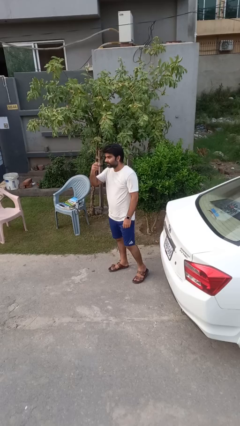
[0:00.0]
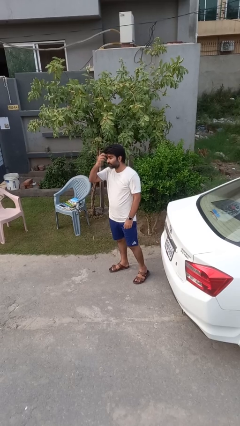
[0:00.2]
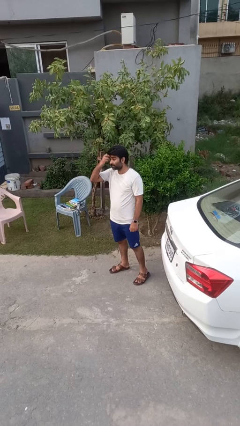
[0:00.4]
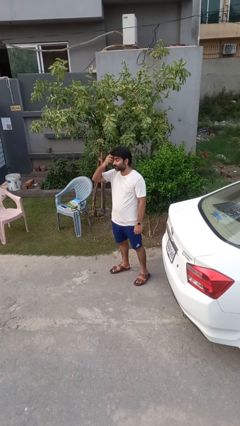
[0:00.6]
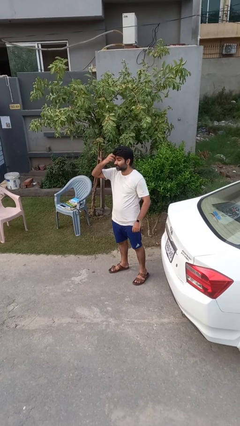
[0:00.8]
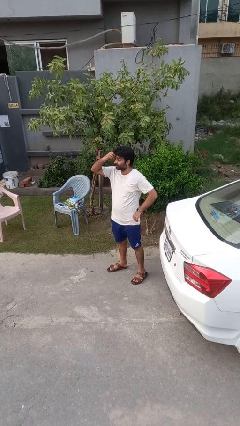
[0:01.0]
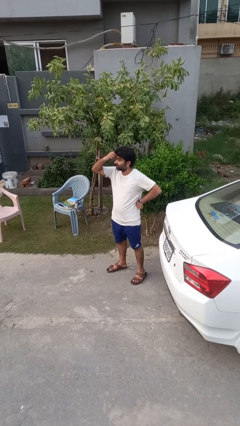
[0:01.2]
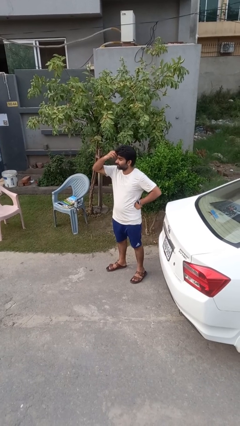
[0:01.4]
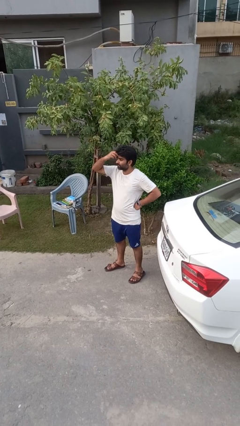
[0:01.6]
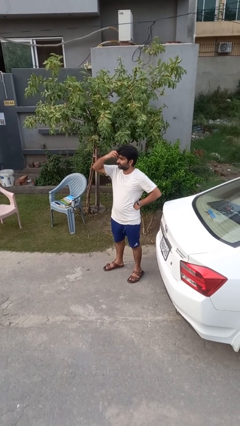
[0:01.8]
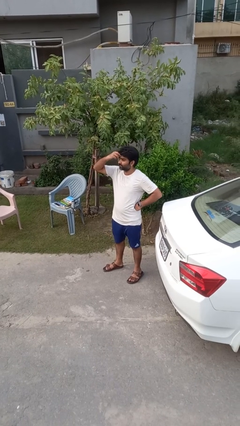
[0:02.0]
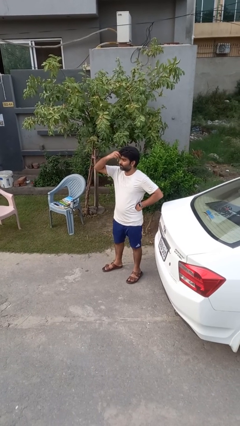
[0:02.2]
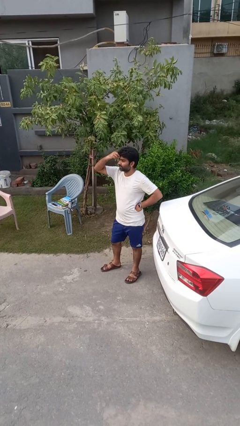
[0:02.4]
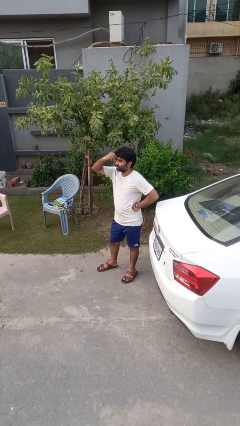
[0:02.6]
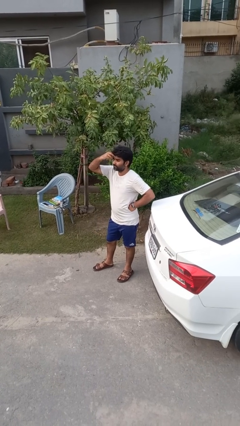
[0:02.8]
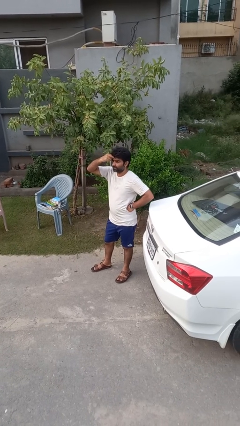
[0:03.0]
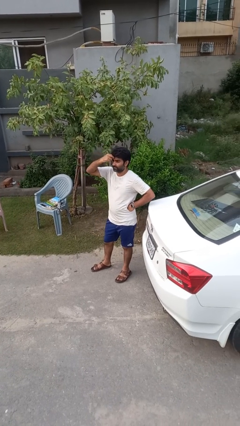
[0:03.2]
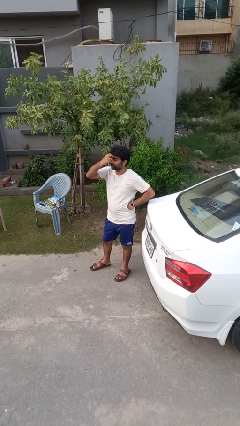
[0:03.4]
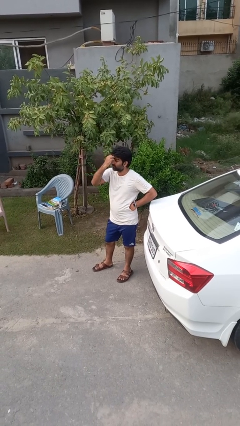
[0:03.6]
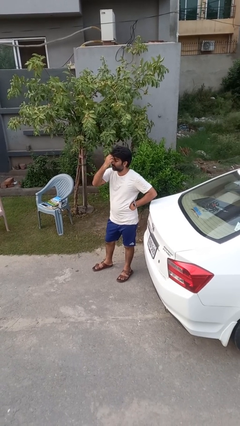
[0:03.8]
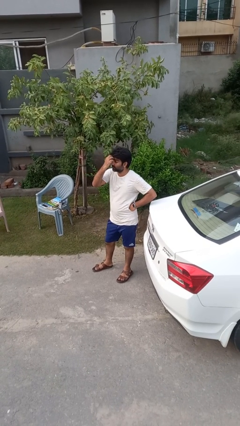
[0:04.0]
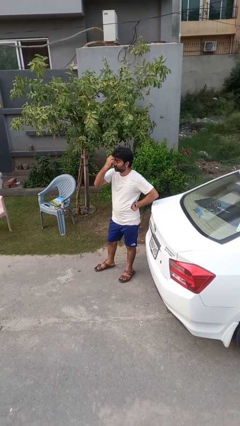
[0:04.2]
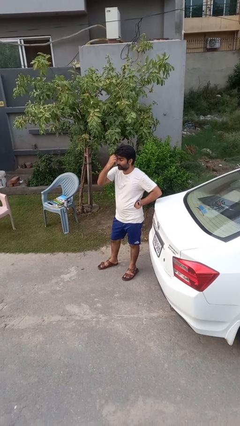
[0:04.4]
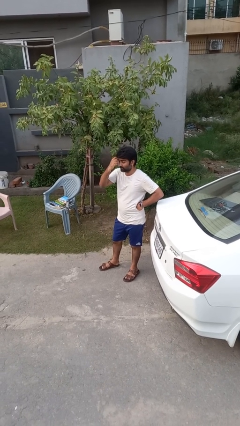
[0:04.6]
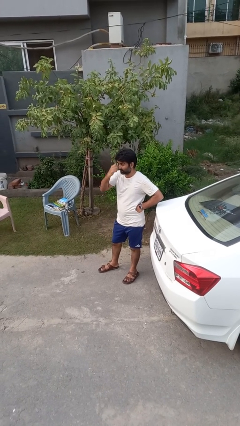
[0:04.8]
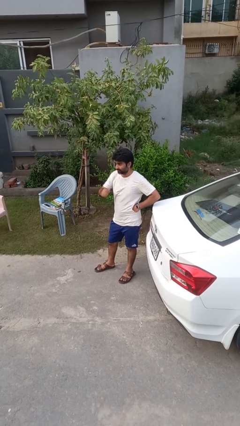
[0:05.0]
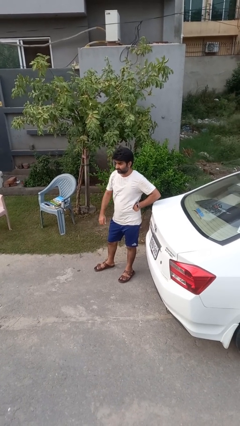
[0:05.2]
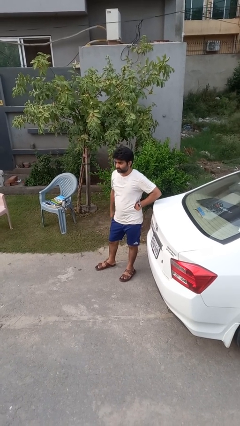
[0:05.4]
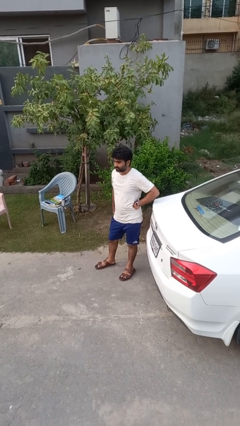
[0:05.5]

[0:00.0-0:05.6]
person scratches face

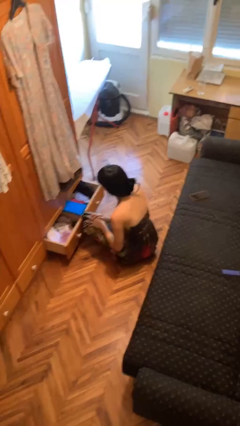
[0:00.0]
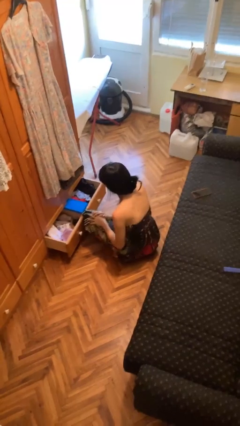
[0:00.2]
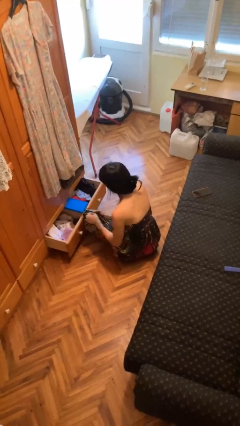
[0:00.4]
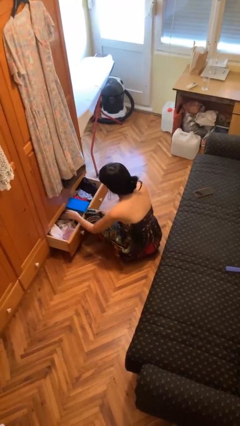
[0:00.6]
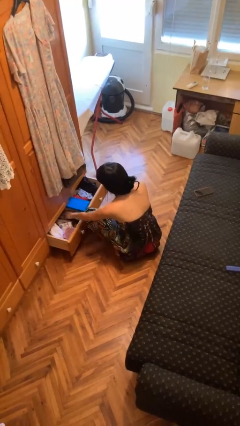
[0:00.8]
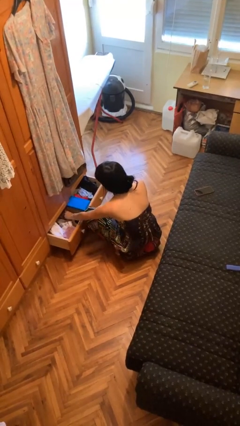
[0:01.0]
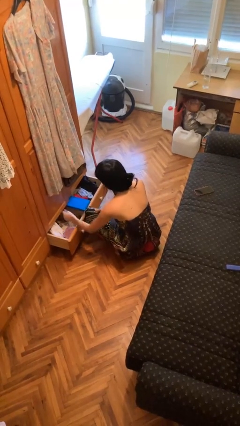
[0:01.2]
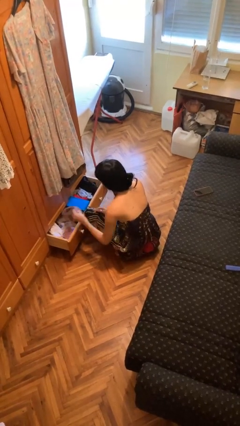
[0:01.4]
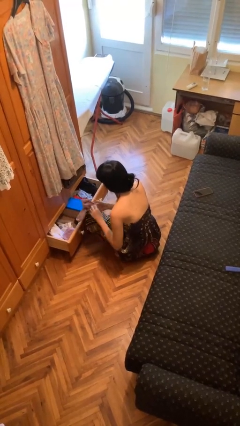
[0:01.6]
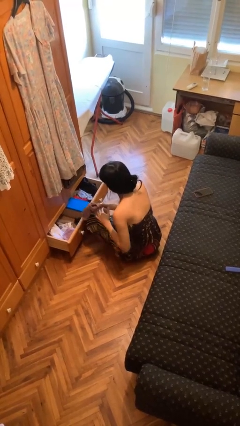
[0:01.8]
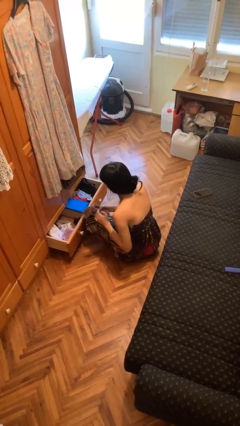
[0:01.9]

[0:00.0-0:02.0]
person takes clothes from dresser

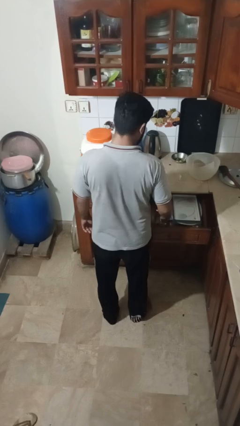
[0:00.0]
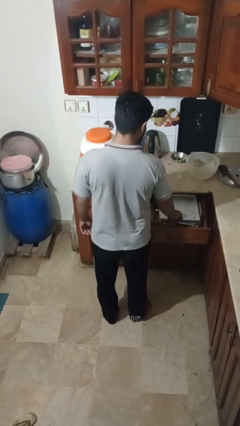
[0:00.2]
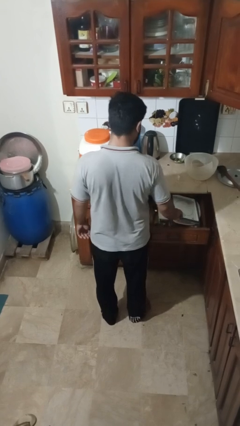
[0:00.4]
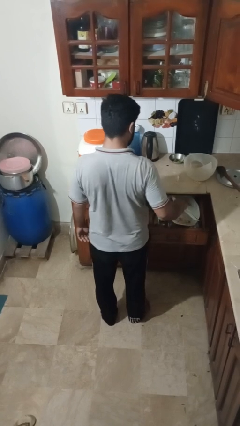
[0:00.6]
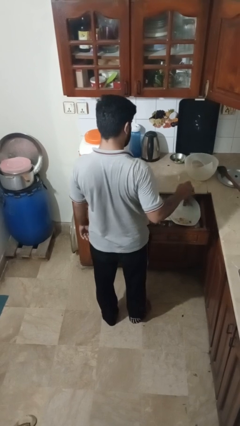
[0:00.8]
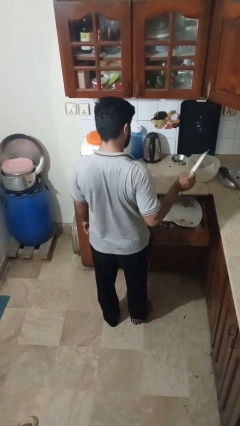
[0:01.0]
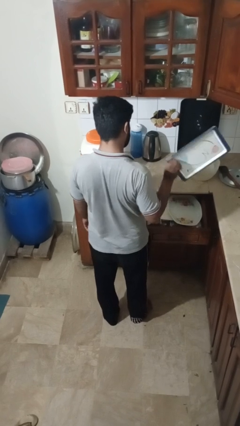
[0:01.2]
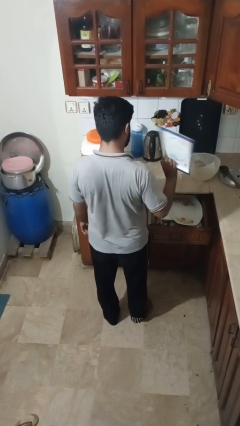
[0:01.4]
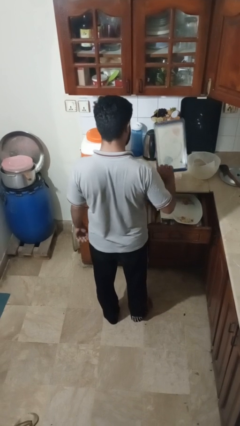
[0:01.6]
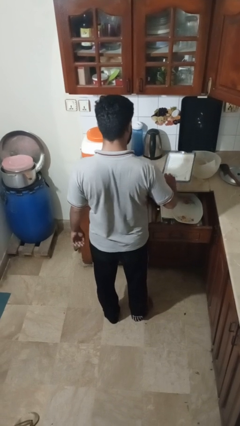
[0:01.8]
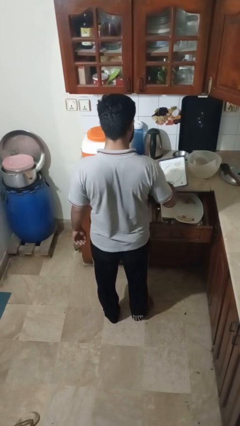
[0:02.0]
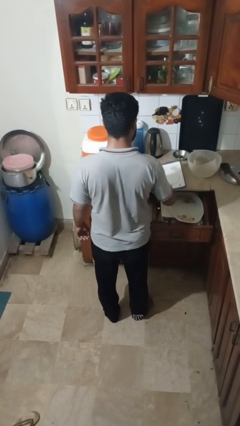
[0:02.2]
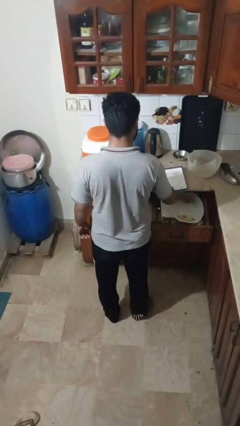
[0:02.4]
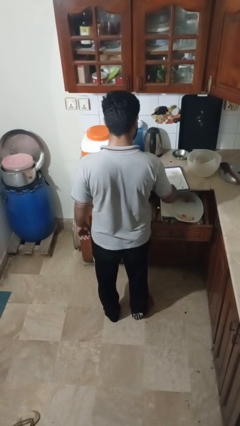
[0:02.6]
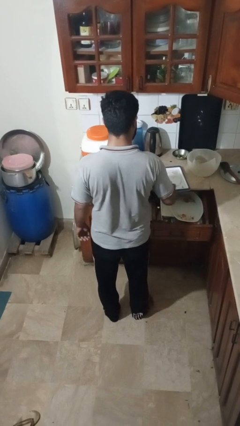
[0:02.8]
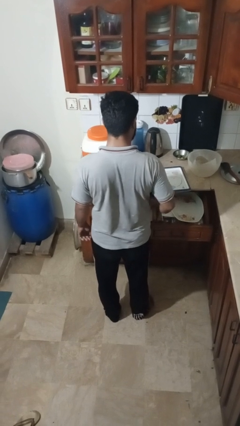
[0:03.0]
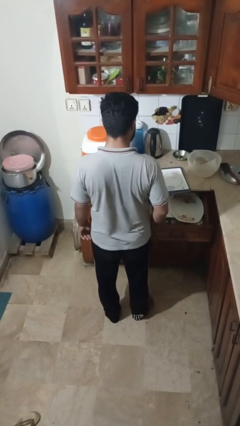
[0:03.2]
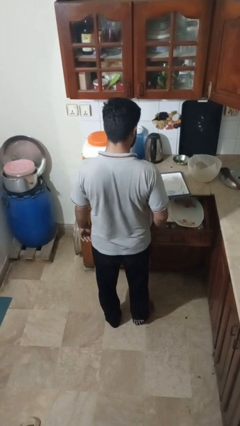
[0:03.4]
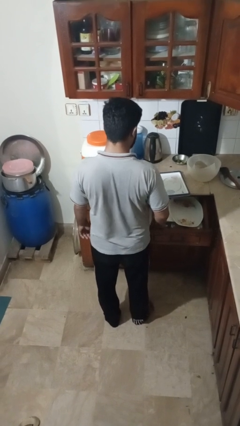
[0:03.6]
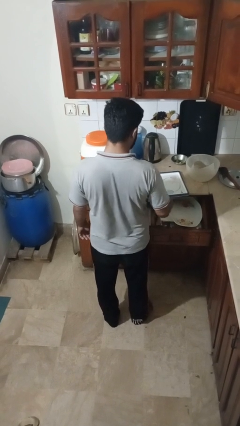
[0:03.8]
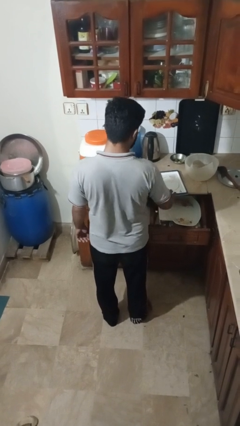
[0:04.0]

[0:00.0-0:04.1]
person takes object from kitchen drawer

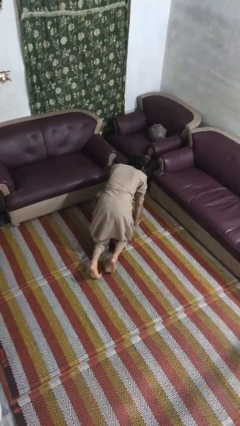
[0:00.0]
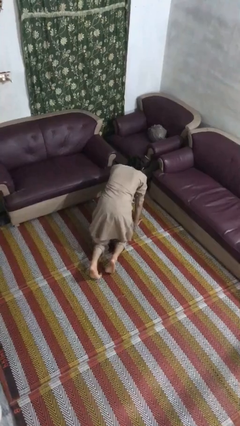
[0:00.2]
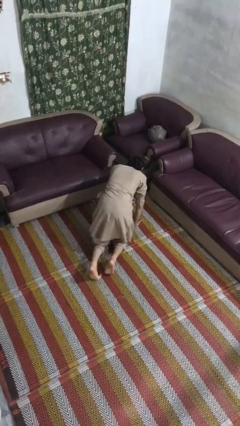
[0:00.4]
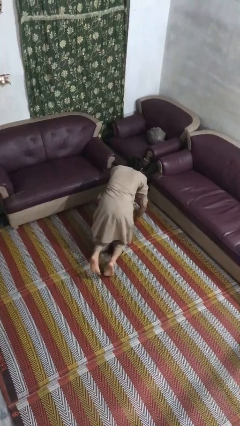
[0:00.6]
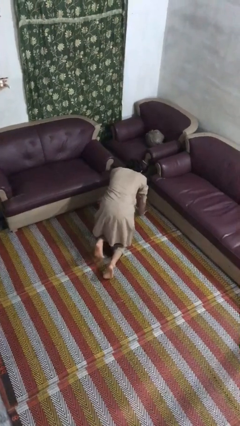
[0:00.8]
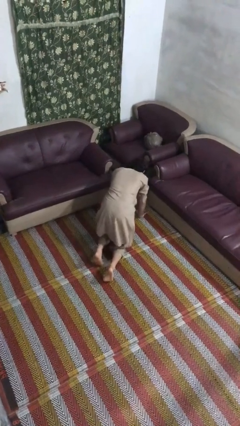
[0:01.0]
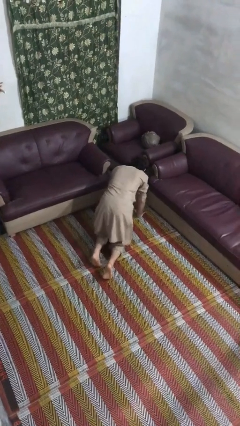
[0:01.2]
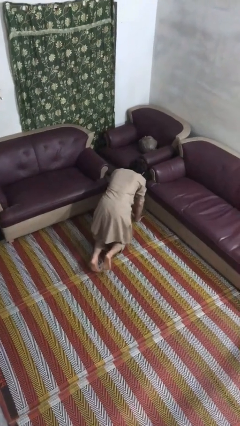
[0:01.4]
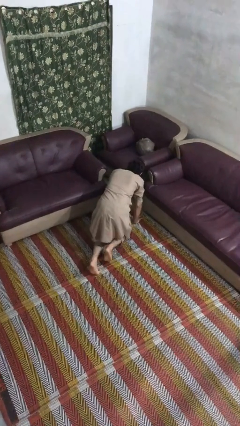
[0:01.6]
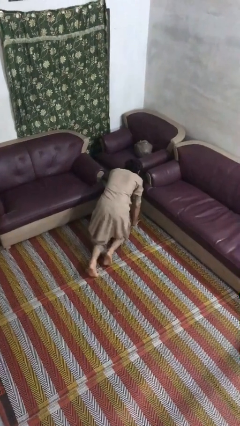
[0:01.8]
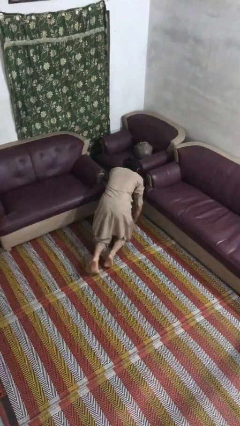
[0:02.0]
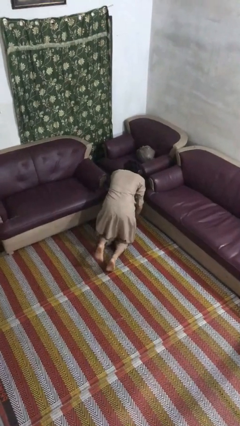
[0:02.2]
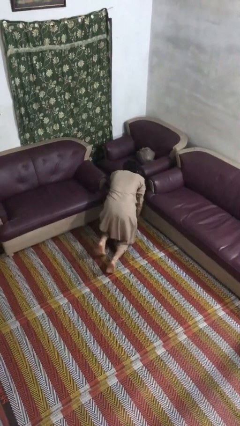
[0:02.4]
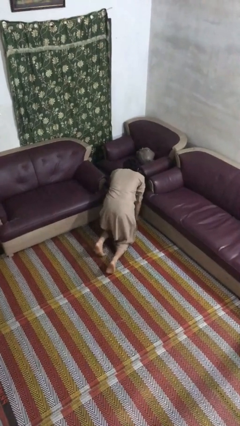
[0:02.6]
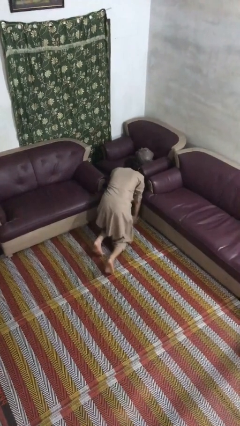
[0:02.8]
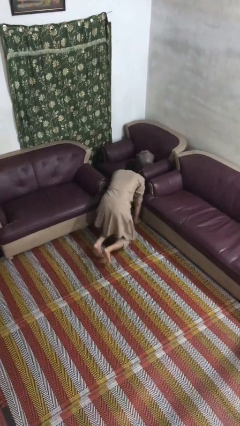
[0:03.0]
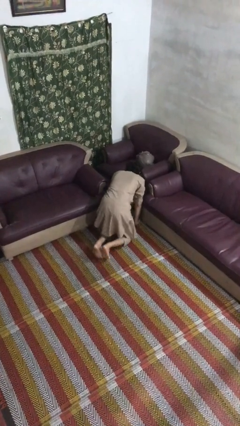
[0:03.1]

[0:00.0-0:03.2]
person crawls

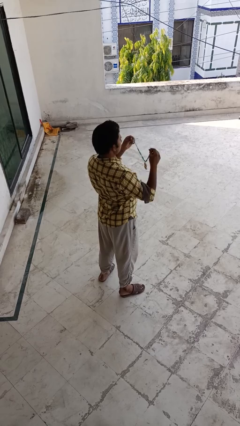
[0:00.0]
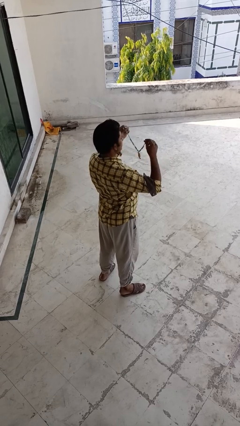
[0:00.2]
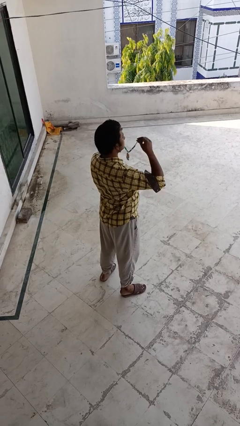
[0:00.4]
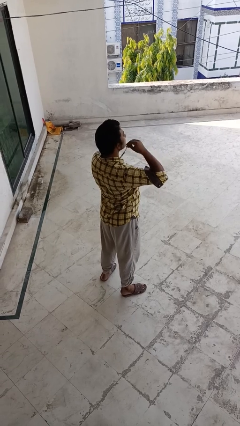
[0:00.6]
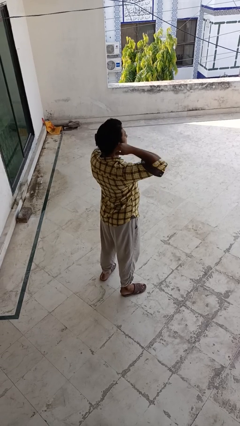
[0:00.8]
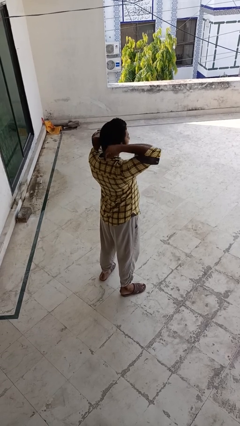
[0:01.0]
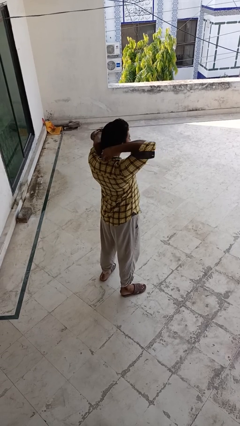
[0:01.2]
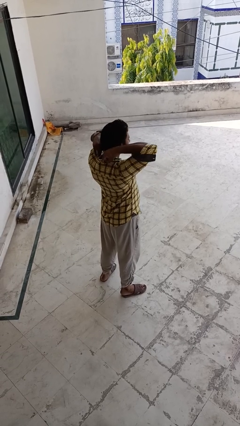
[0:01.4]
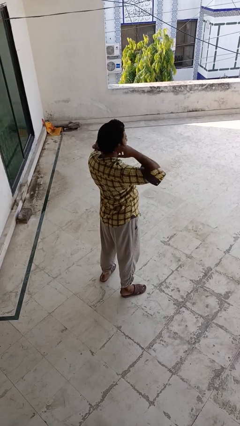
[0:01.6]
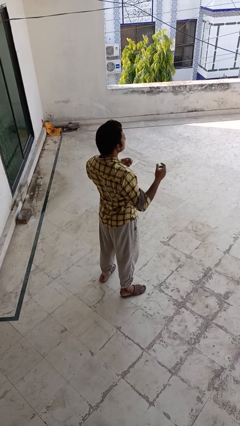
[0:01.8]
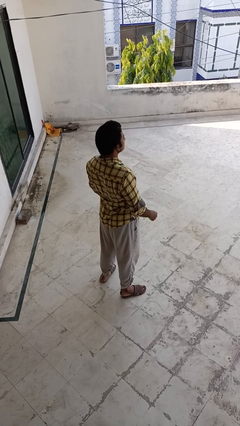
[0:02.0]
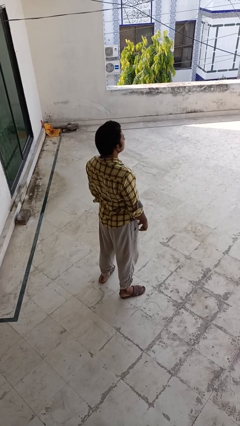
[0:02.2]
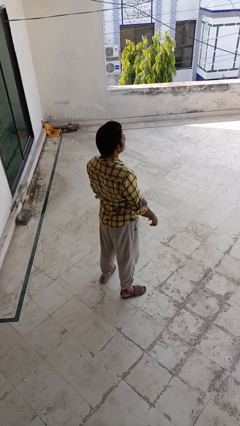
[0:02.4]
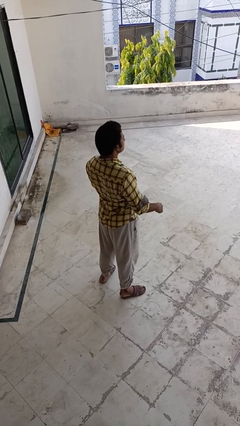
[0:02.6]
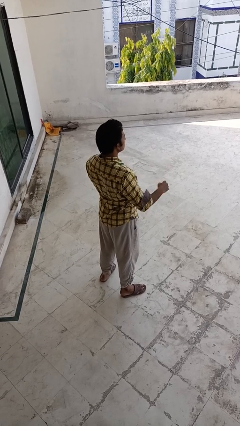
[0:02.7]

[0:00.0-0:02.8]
person puts on necklace
